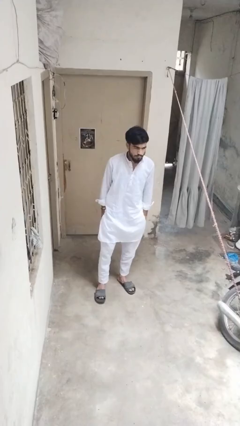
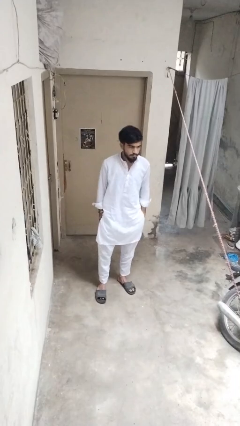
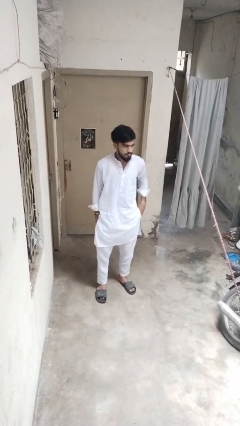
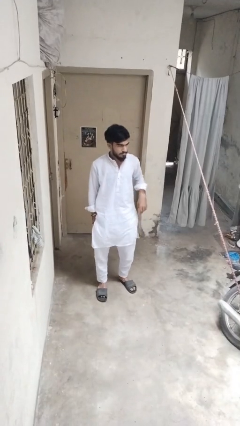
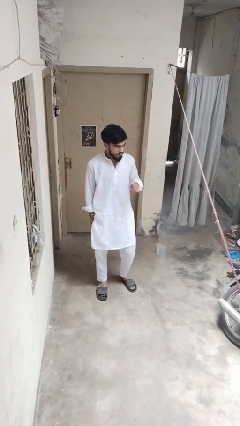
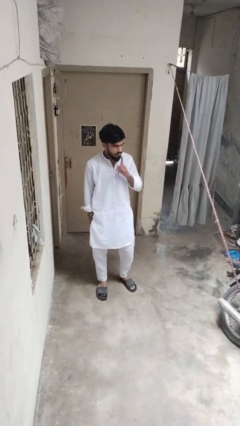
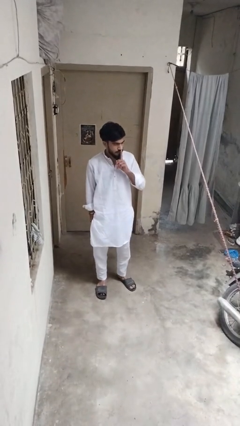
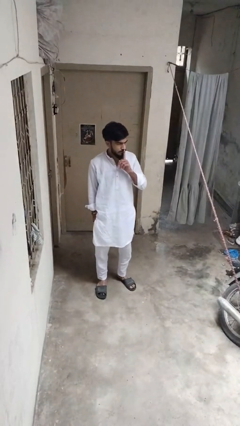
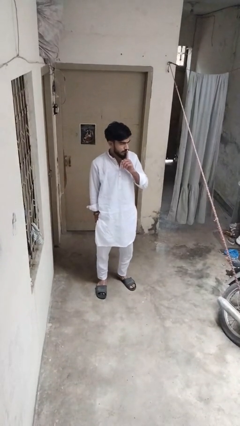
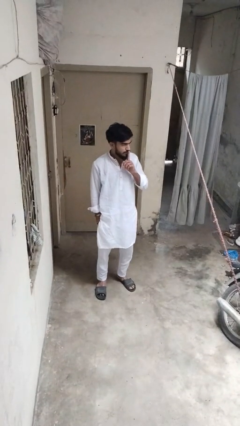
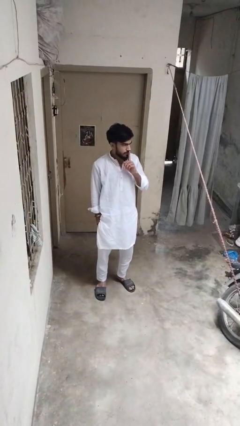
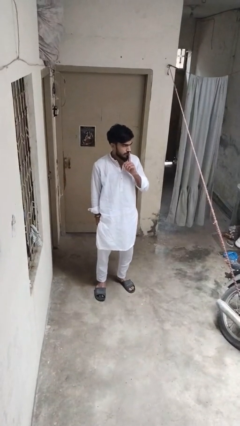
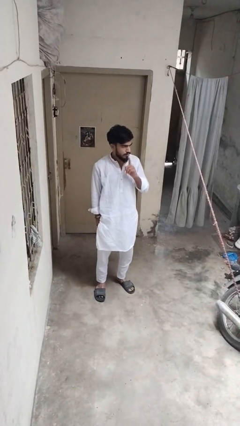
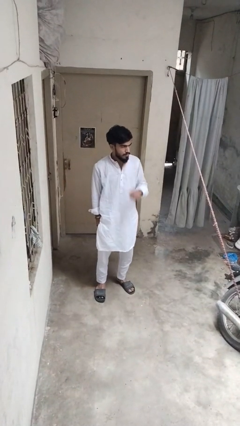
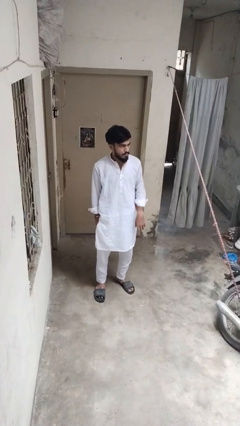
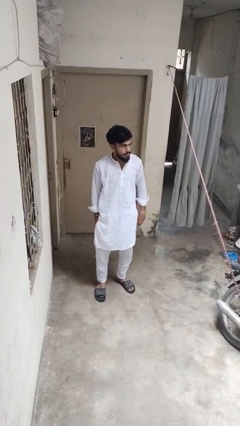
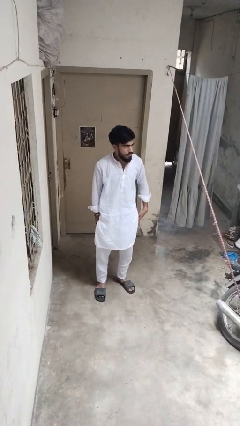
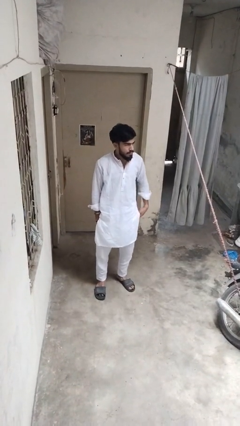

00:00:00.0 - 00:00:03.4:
person gestures be quiet

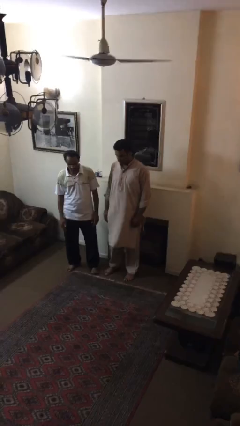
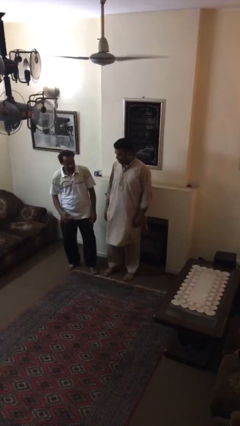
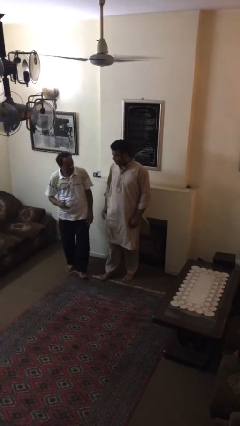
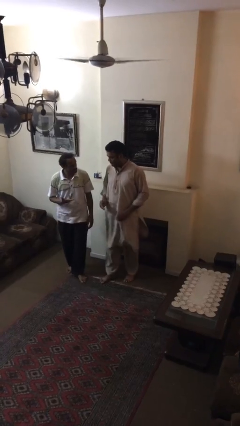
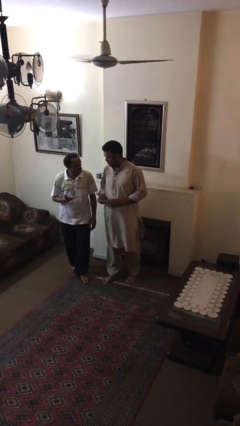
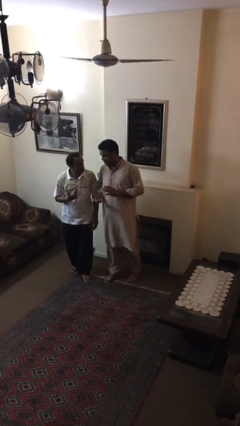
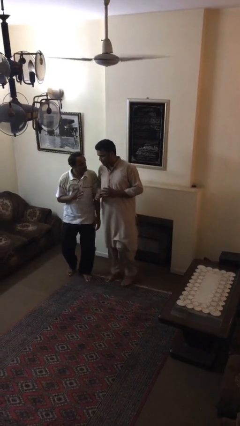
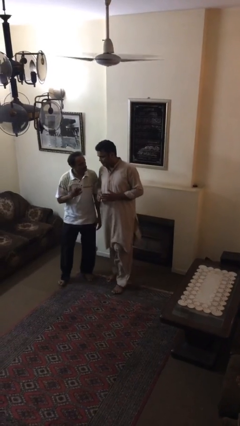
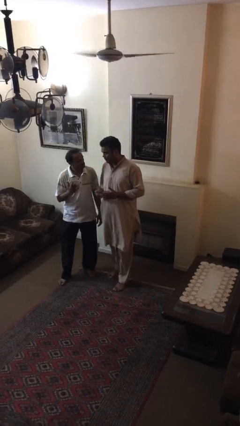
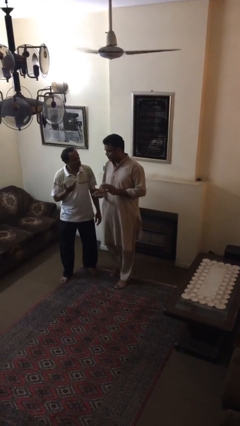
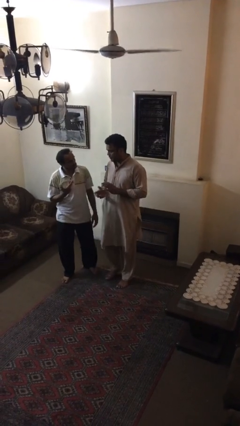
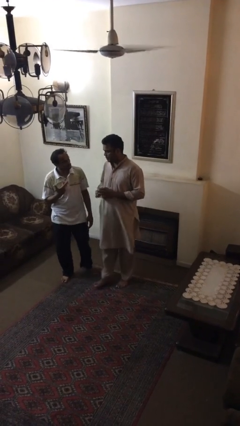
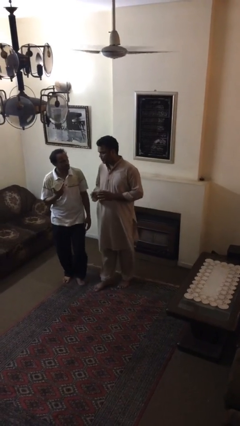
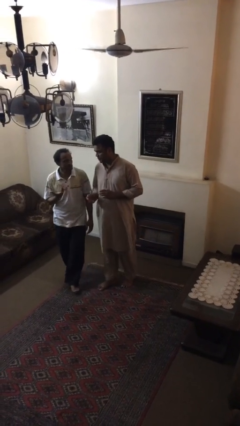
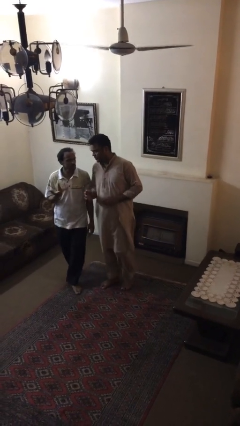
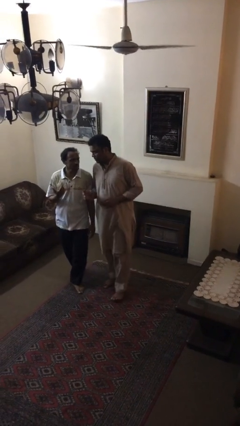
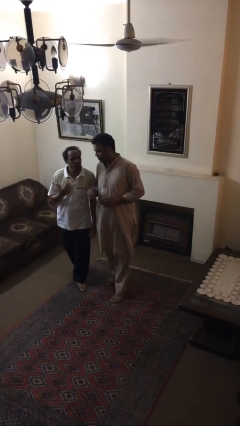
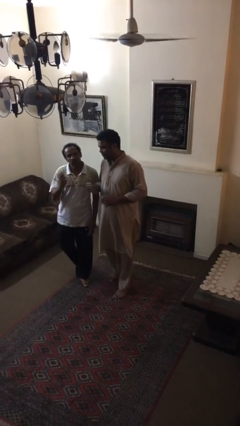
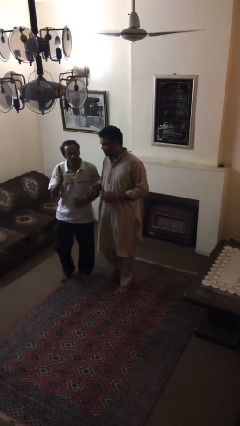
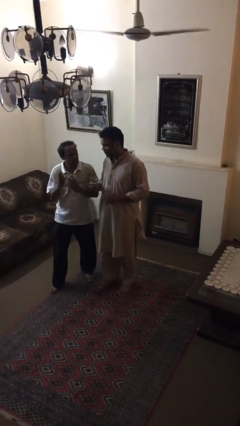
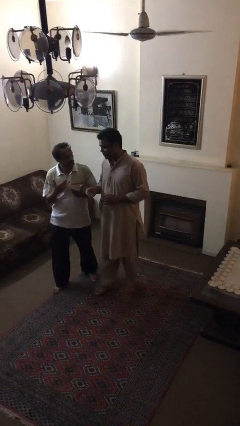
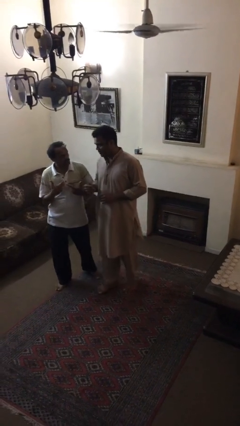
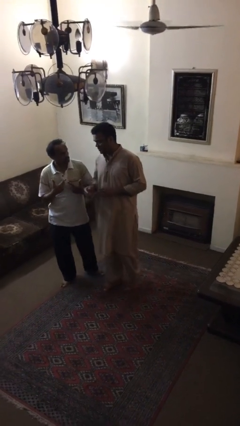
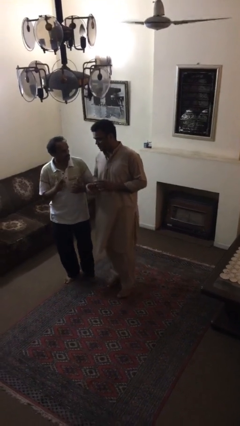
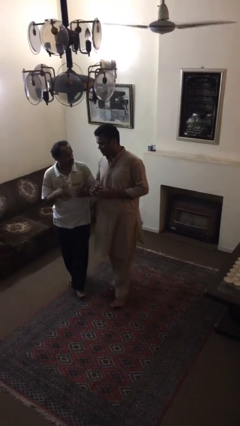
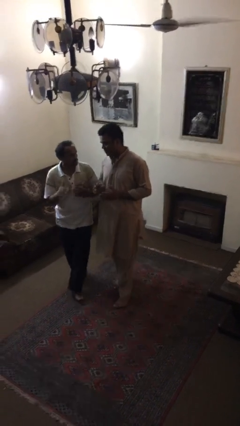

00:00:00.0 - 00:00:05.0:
person talks to person

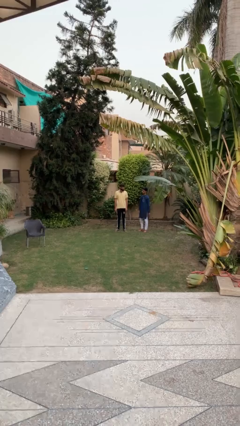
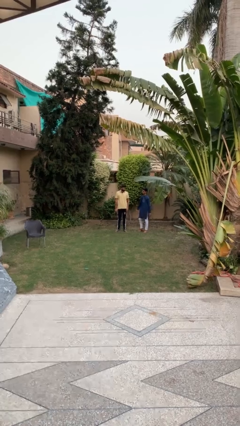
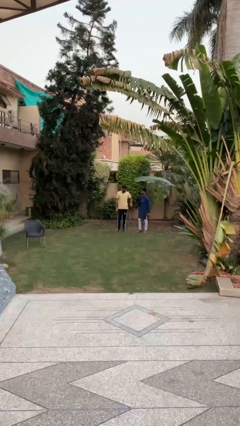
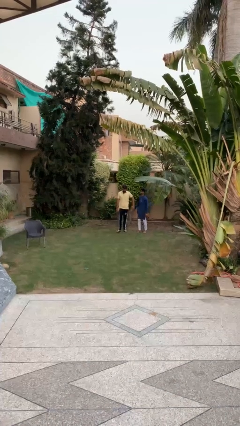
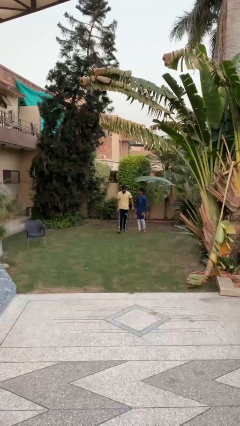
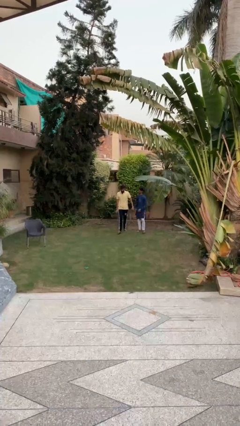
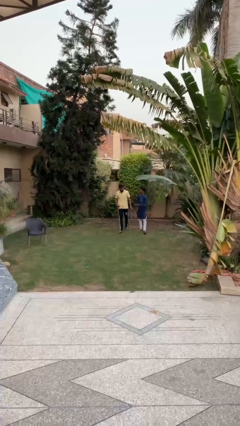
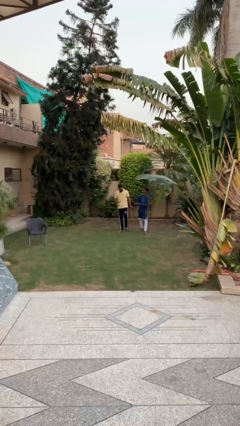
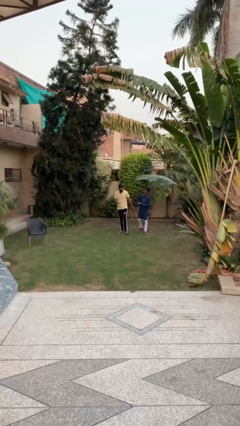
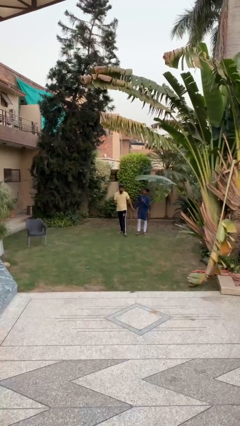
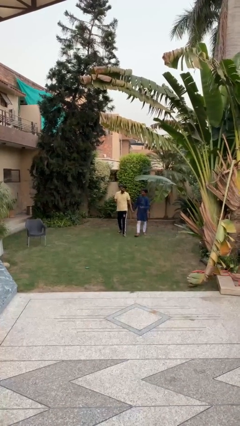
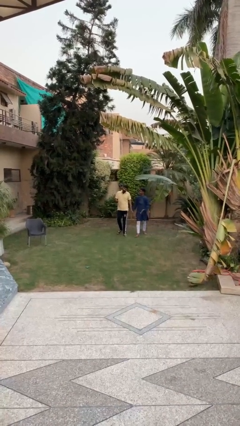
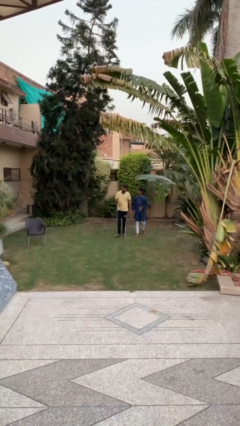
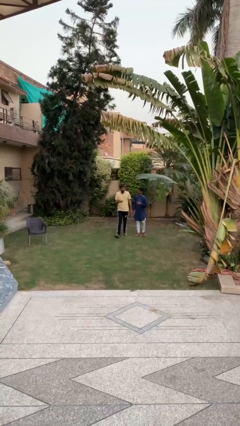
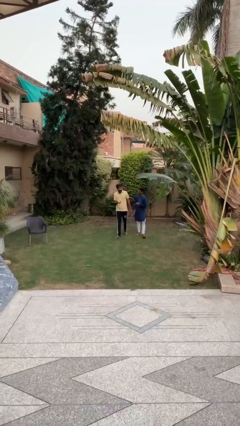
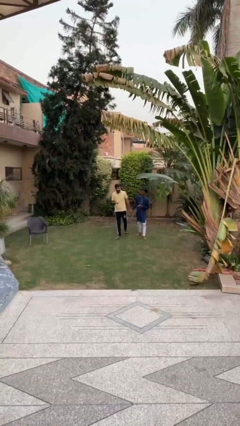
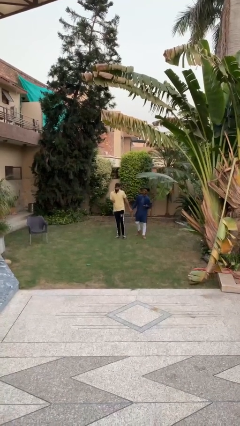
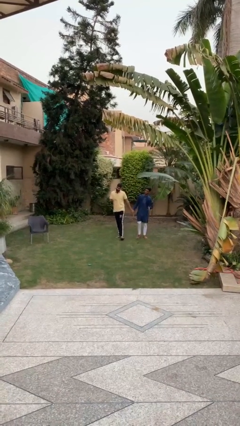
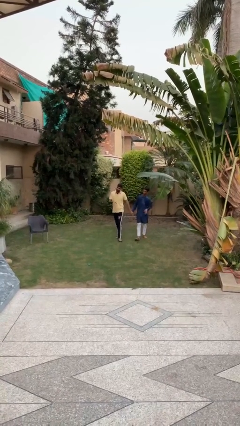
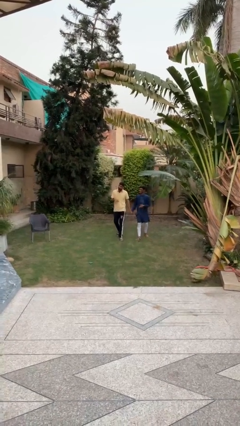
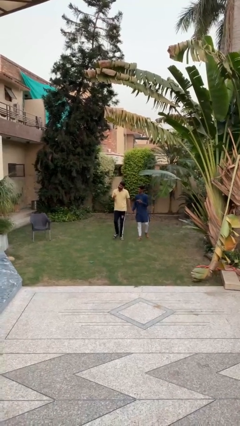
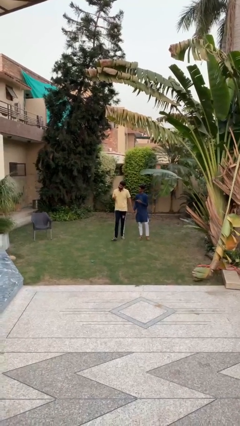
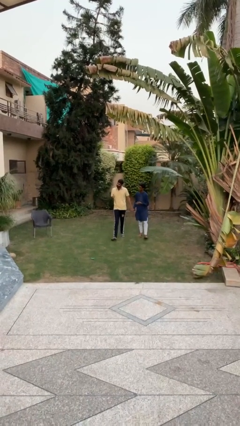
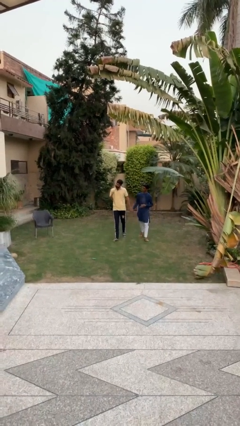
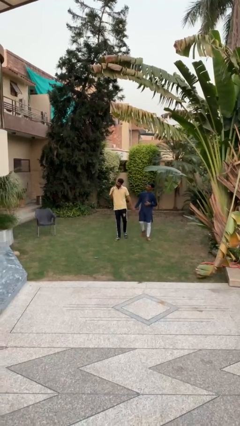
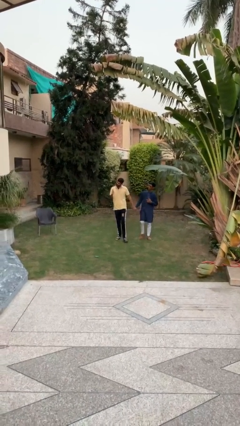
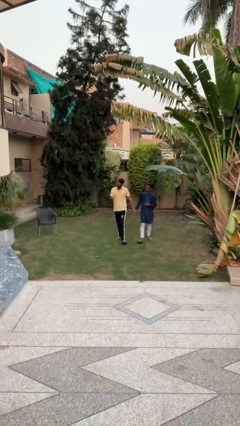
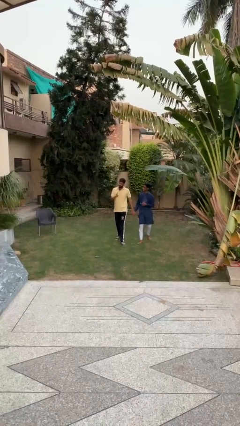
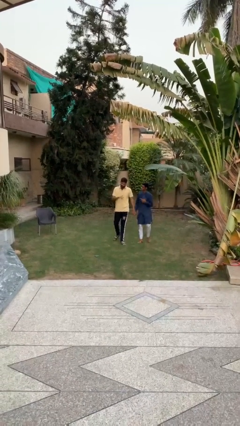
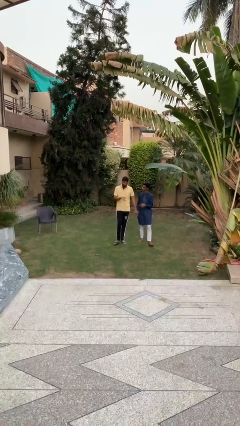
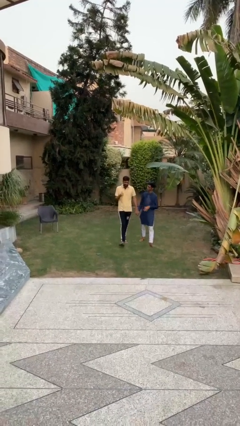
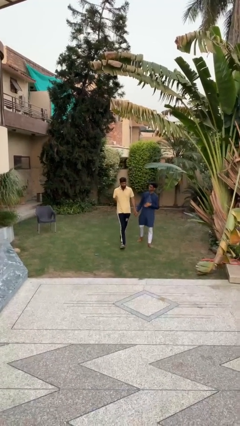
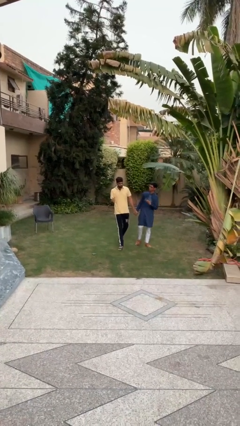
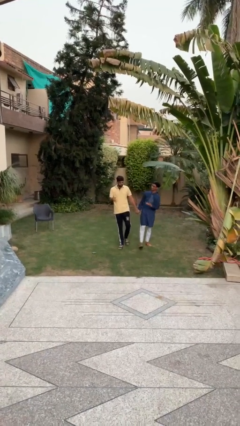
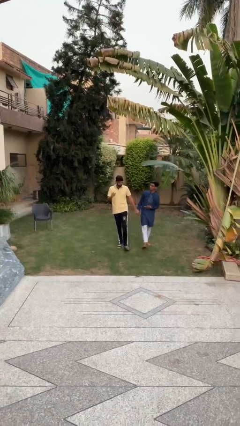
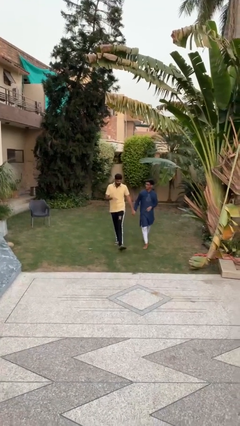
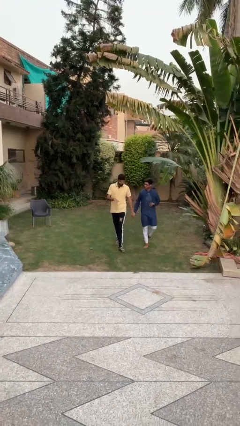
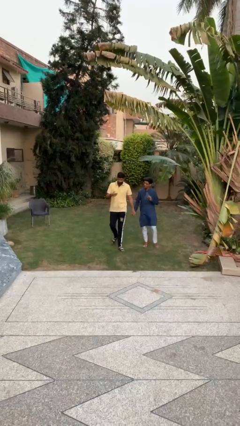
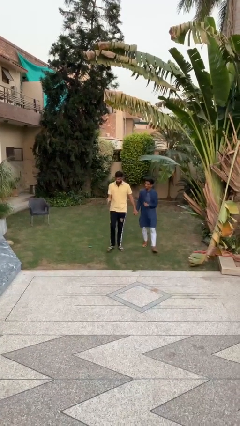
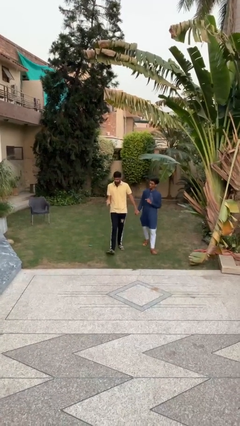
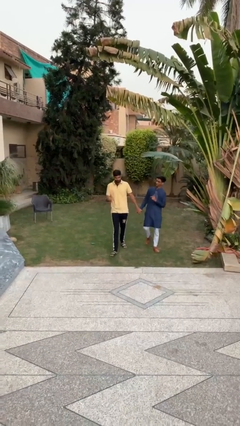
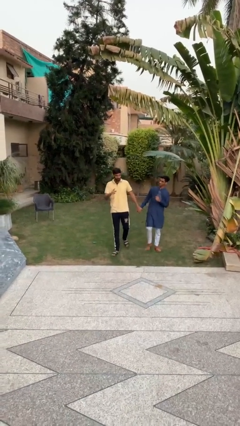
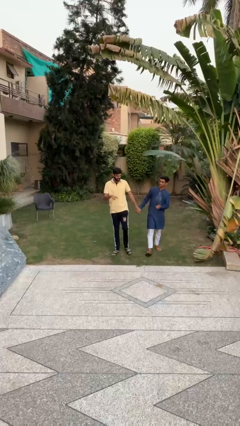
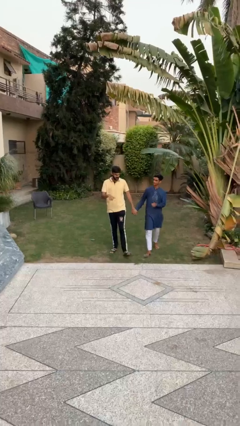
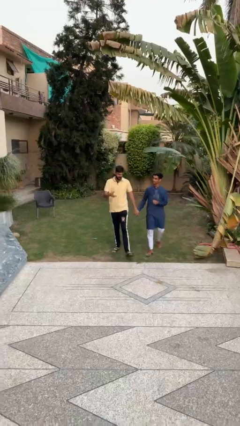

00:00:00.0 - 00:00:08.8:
person holds hand

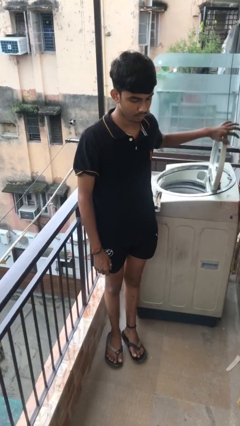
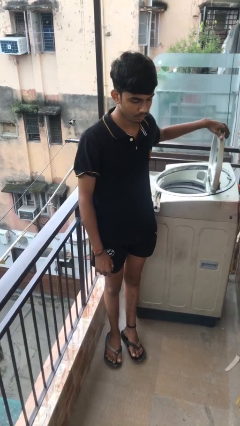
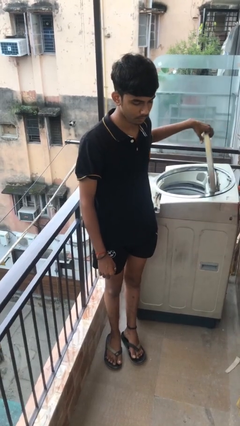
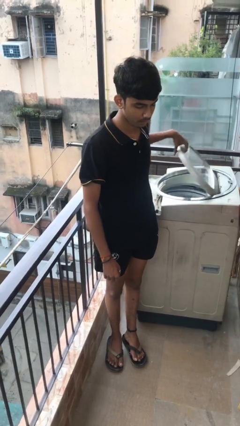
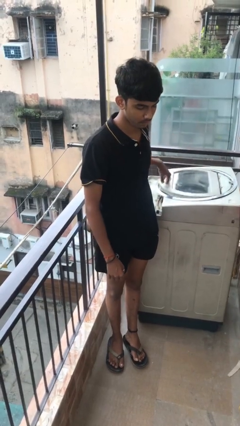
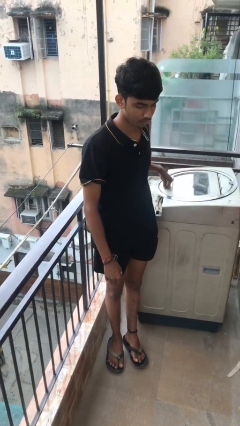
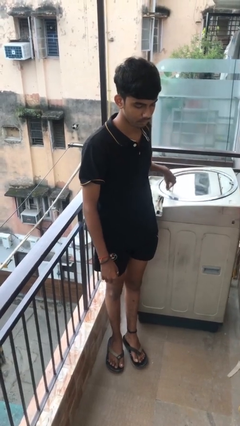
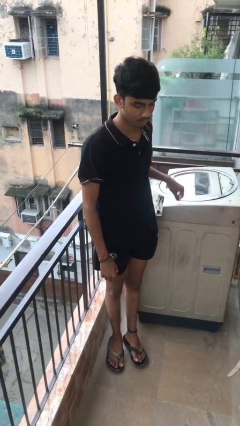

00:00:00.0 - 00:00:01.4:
person closes clothes washer
